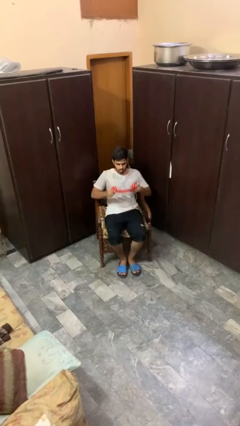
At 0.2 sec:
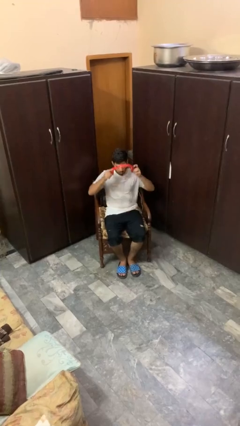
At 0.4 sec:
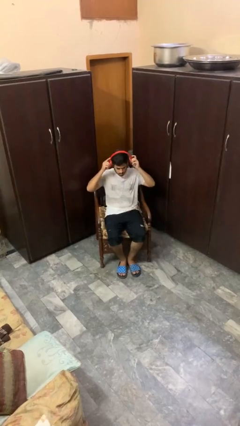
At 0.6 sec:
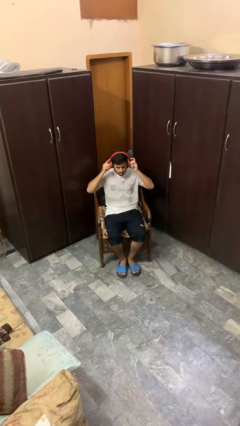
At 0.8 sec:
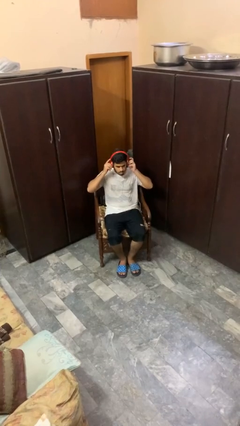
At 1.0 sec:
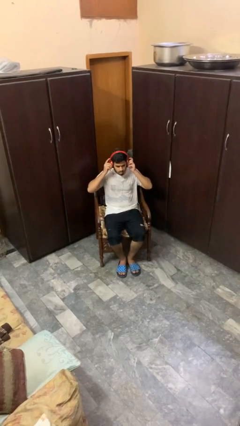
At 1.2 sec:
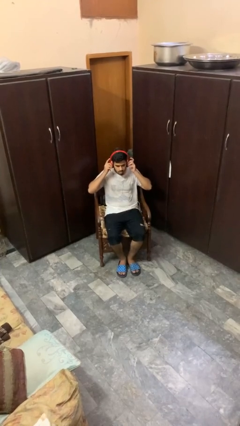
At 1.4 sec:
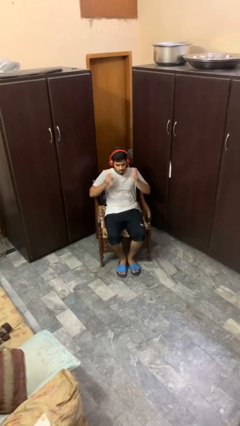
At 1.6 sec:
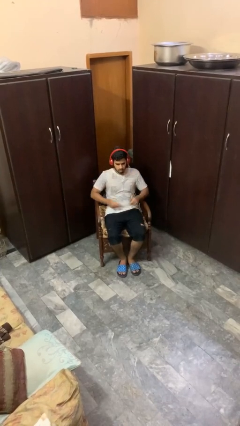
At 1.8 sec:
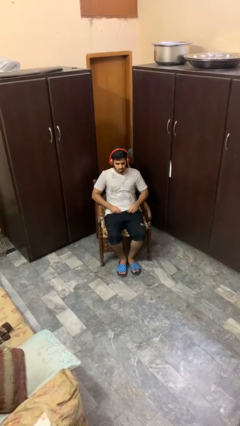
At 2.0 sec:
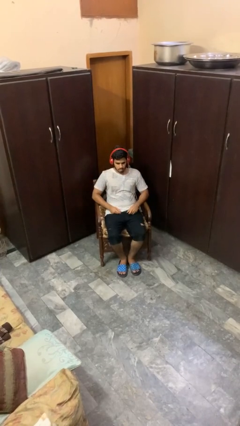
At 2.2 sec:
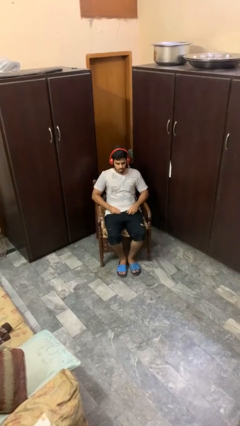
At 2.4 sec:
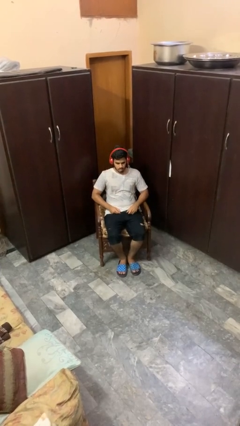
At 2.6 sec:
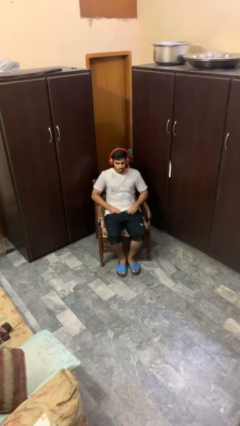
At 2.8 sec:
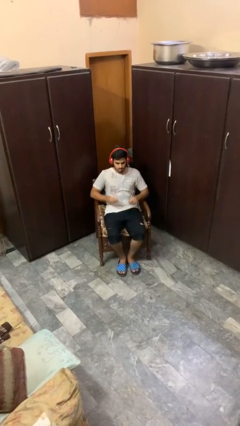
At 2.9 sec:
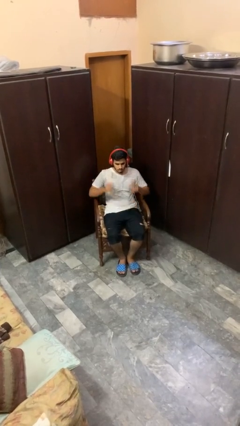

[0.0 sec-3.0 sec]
person puts on headphones

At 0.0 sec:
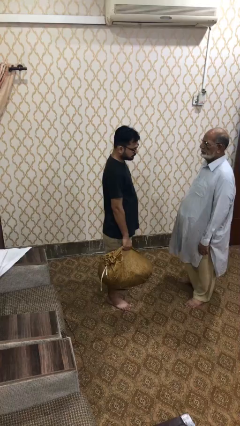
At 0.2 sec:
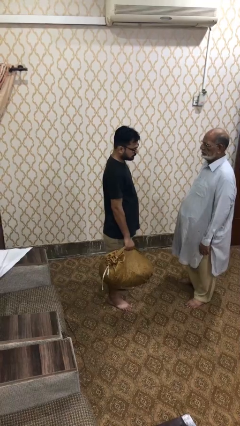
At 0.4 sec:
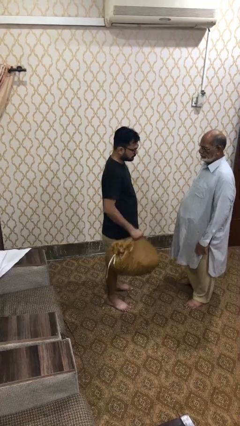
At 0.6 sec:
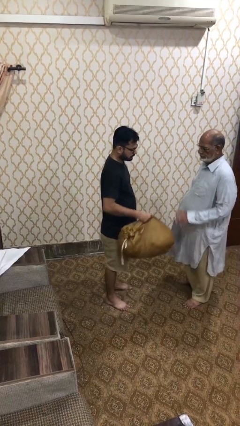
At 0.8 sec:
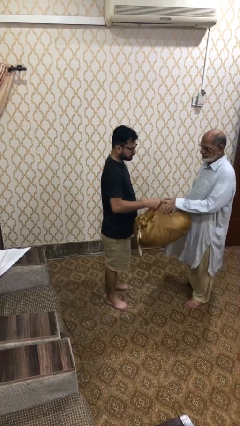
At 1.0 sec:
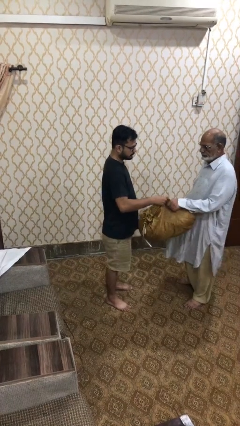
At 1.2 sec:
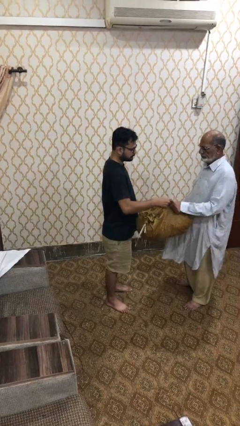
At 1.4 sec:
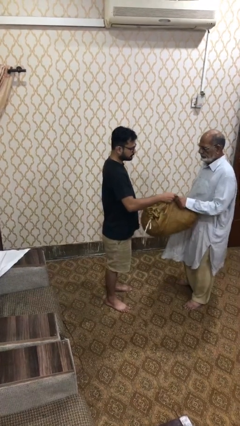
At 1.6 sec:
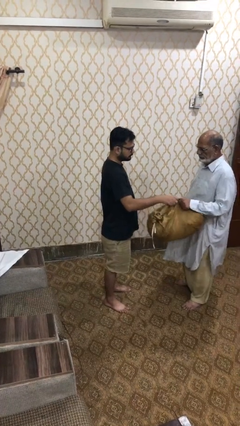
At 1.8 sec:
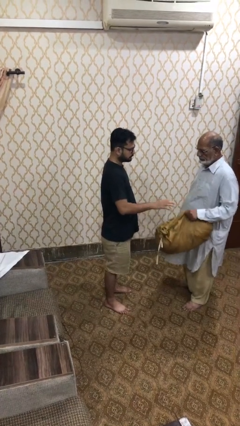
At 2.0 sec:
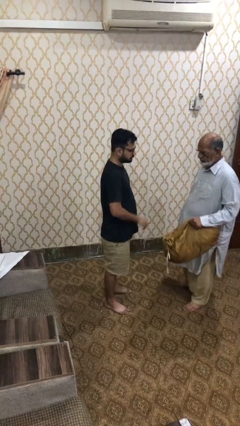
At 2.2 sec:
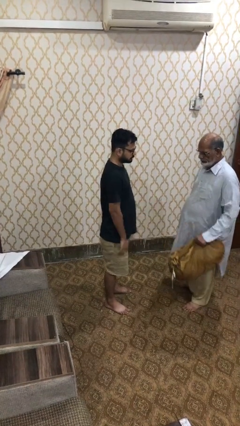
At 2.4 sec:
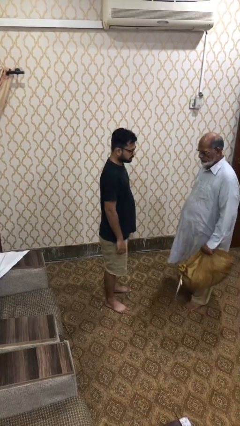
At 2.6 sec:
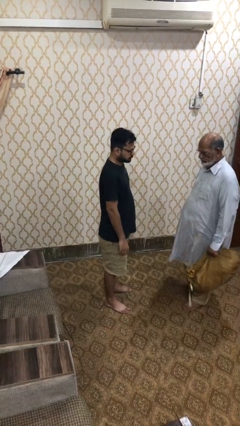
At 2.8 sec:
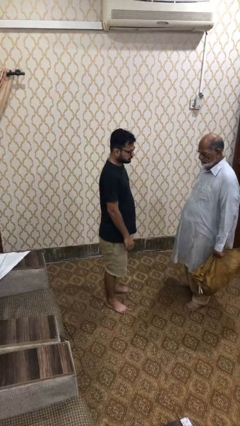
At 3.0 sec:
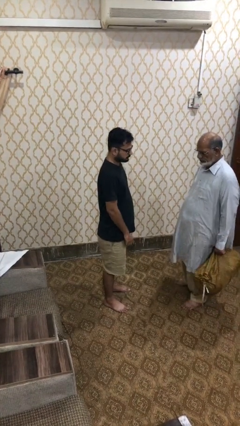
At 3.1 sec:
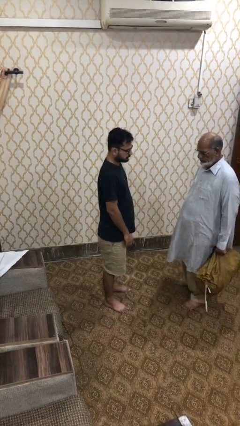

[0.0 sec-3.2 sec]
person transfers object to person

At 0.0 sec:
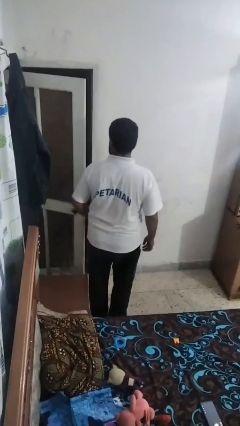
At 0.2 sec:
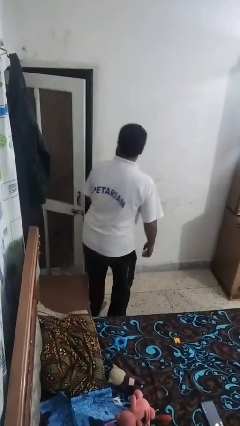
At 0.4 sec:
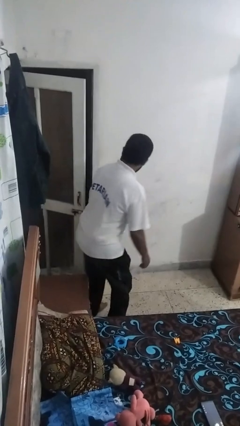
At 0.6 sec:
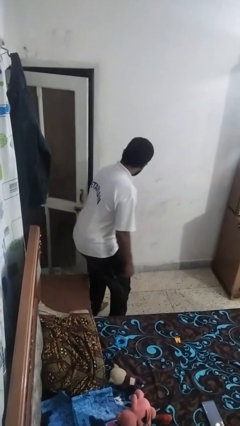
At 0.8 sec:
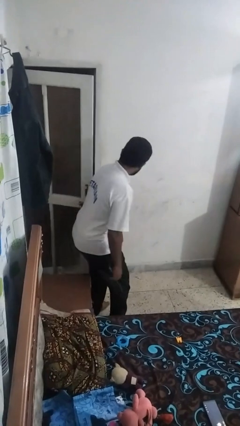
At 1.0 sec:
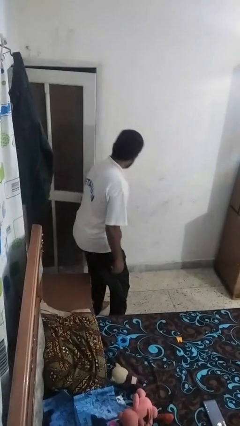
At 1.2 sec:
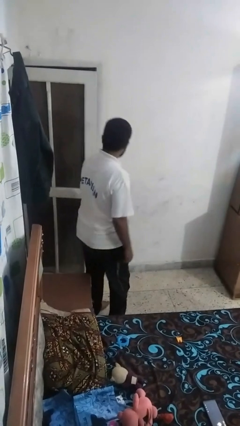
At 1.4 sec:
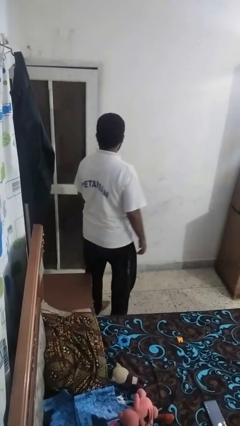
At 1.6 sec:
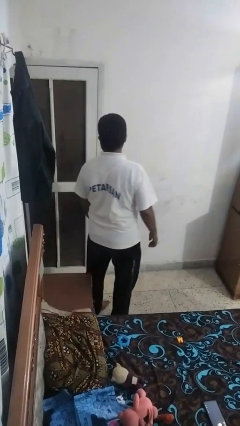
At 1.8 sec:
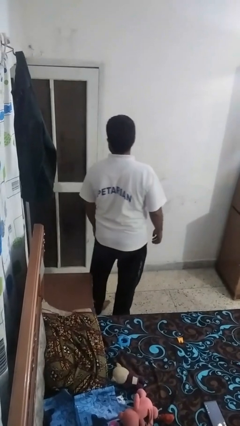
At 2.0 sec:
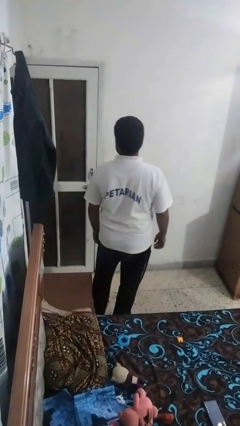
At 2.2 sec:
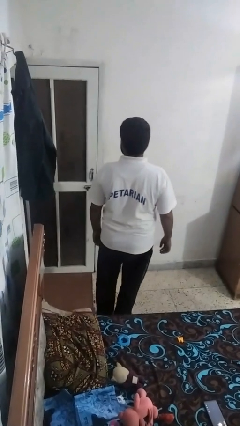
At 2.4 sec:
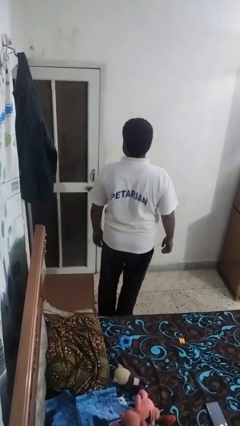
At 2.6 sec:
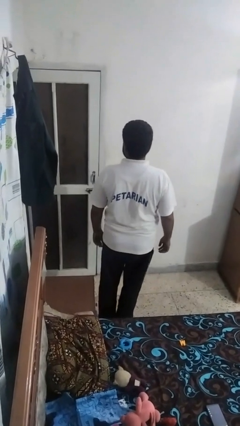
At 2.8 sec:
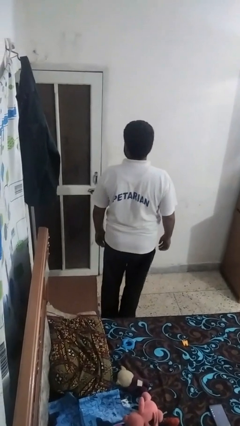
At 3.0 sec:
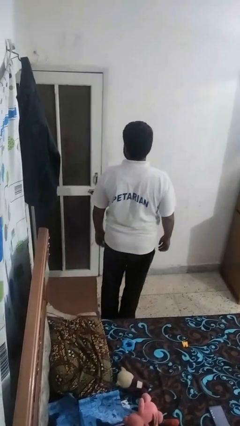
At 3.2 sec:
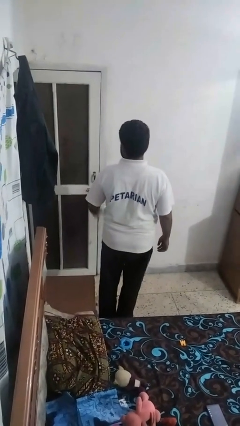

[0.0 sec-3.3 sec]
person closes door with hip

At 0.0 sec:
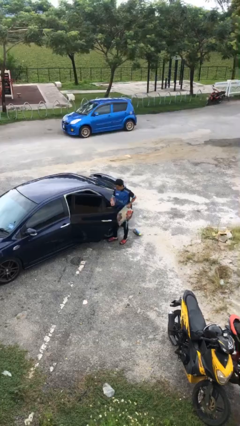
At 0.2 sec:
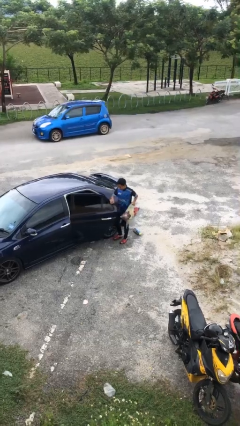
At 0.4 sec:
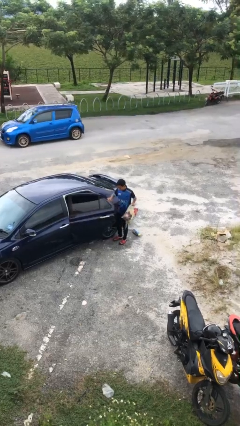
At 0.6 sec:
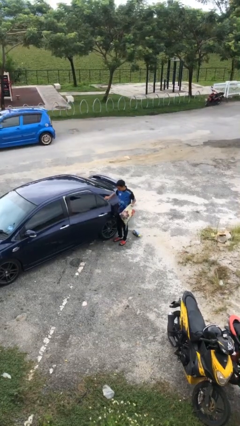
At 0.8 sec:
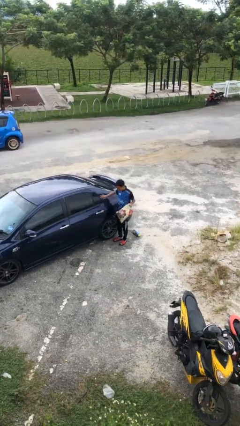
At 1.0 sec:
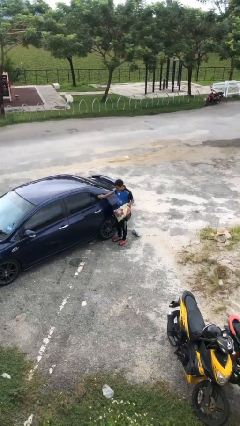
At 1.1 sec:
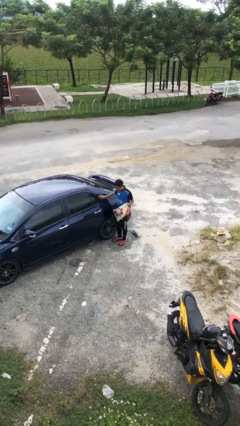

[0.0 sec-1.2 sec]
person closes car door

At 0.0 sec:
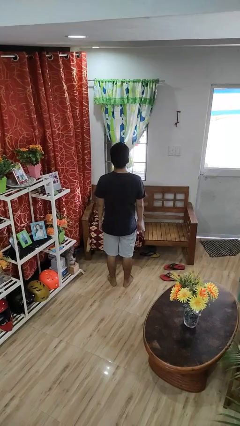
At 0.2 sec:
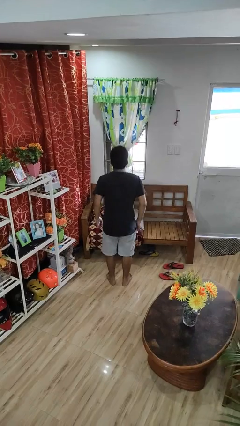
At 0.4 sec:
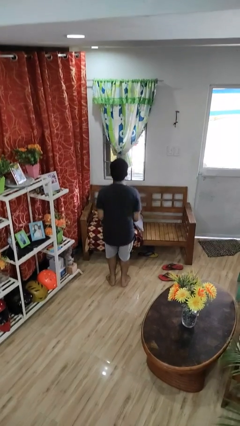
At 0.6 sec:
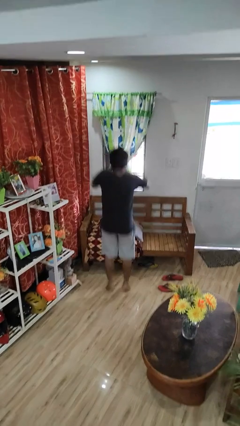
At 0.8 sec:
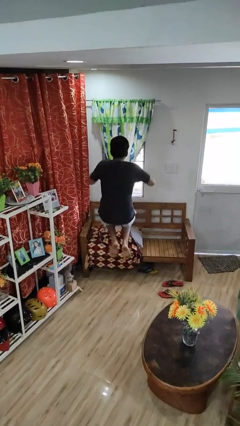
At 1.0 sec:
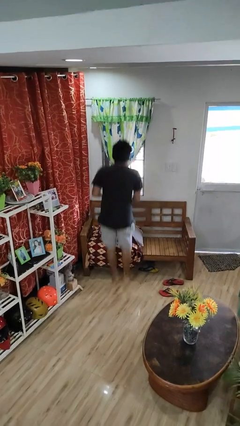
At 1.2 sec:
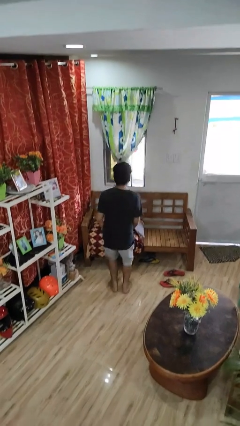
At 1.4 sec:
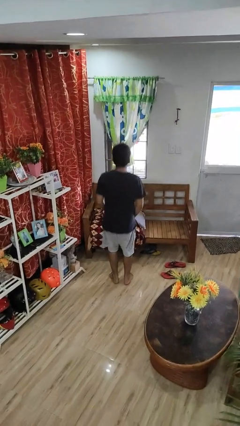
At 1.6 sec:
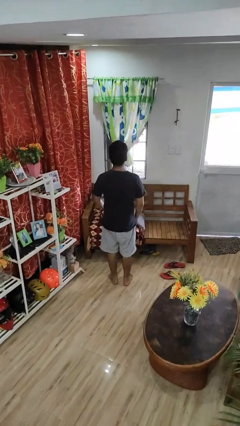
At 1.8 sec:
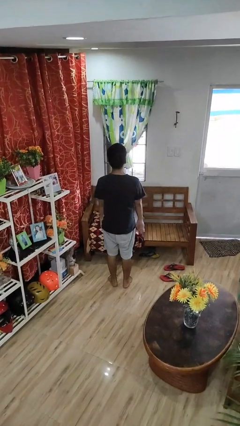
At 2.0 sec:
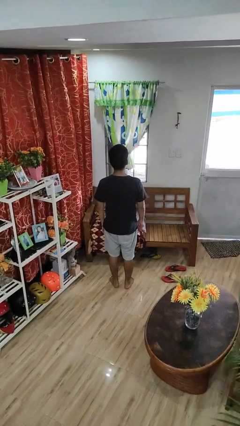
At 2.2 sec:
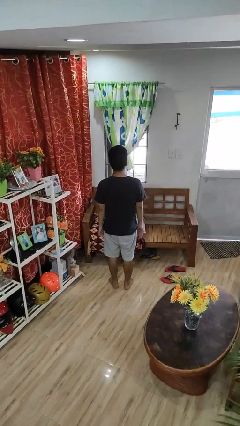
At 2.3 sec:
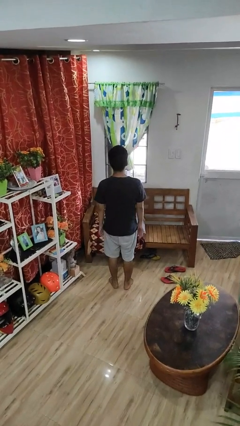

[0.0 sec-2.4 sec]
person jumps

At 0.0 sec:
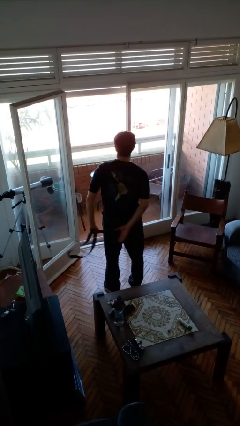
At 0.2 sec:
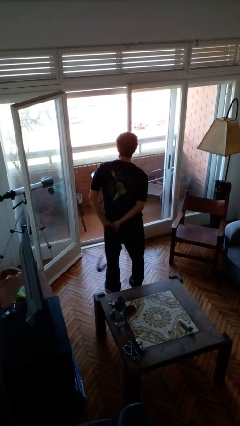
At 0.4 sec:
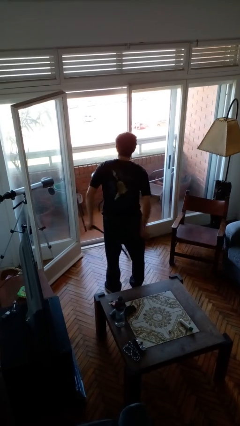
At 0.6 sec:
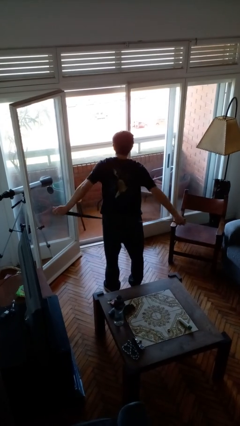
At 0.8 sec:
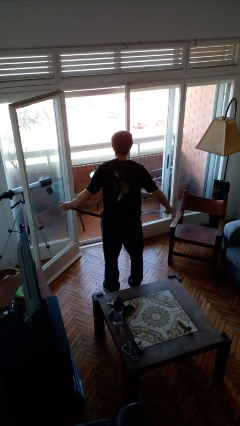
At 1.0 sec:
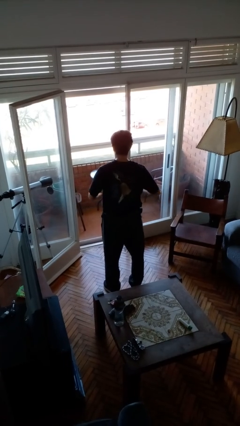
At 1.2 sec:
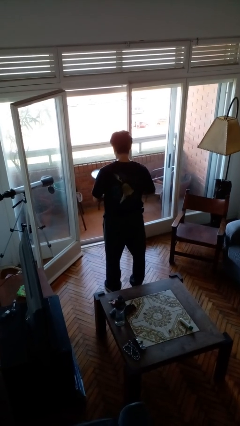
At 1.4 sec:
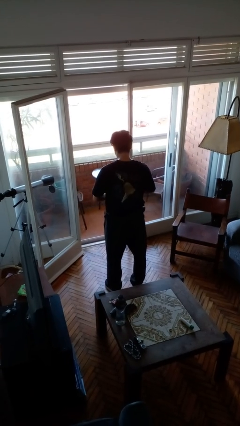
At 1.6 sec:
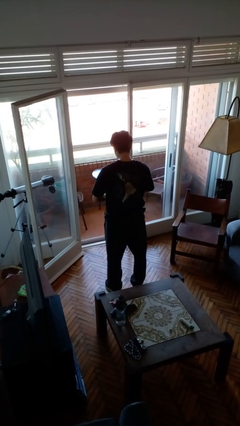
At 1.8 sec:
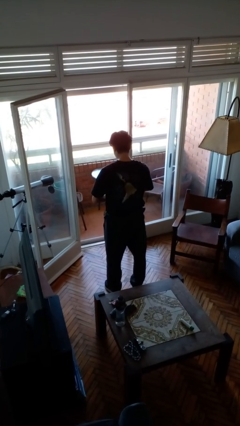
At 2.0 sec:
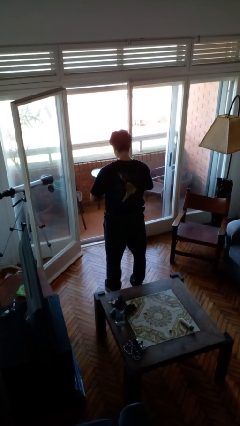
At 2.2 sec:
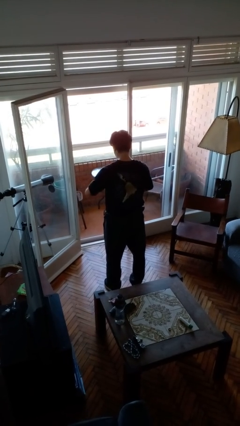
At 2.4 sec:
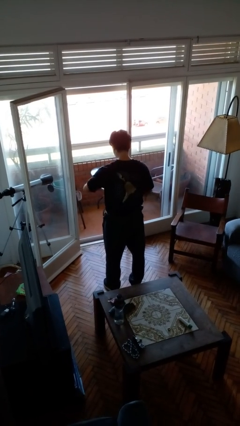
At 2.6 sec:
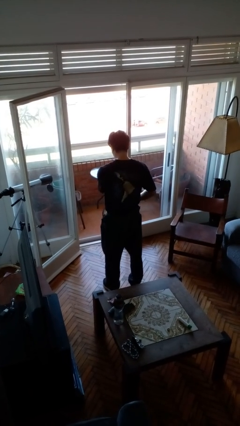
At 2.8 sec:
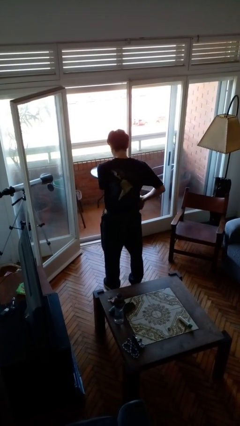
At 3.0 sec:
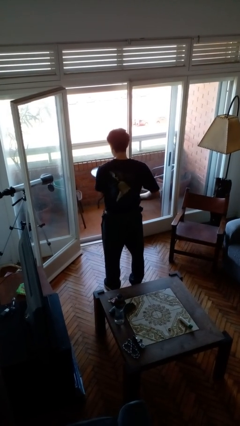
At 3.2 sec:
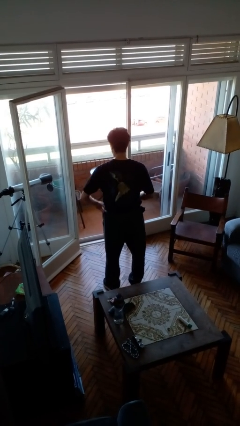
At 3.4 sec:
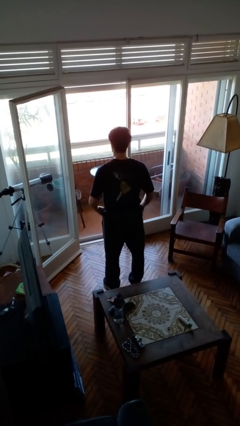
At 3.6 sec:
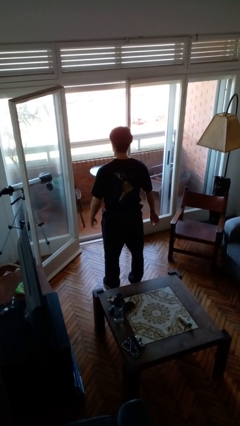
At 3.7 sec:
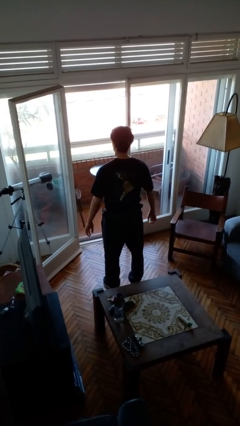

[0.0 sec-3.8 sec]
person puts on belt

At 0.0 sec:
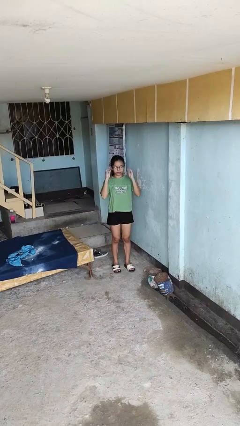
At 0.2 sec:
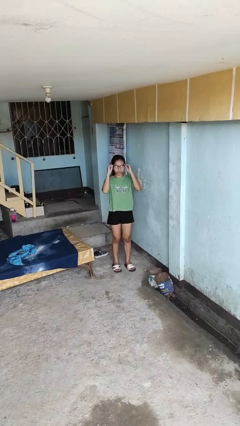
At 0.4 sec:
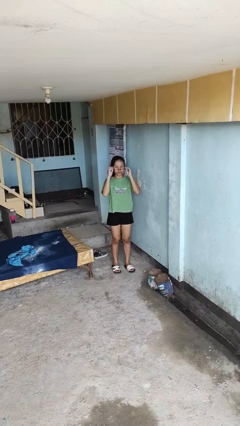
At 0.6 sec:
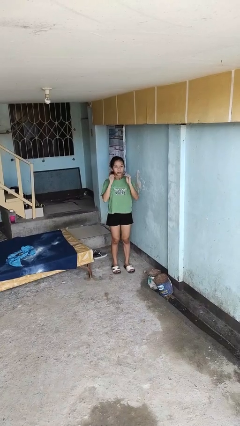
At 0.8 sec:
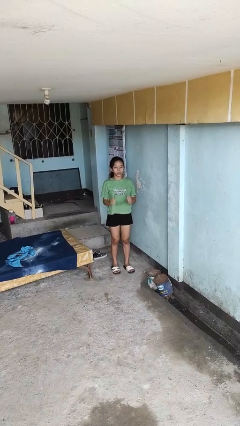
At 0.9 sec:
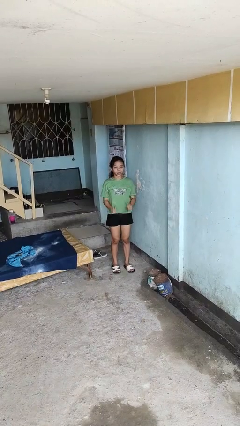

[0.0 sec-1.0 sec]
person takes off glasses
